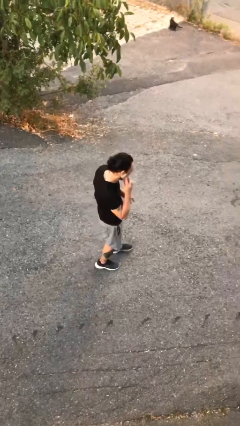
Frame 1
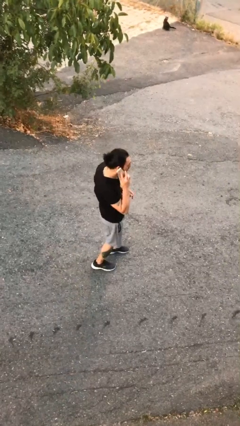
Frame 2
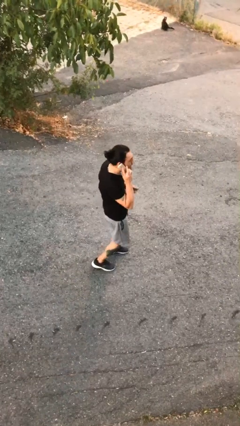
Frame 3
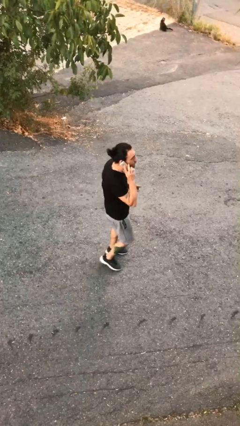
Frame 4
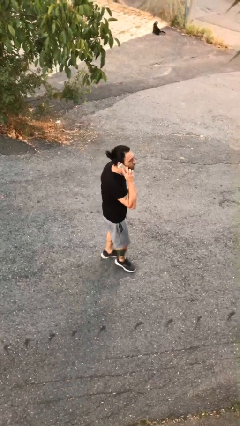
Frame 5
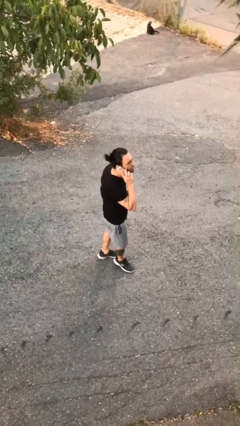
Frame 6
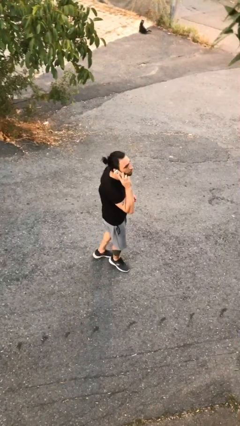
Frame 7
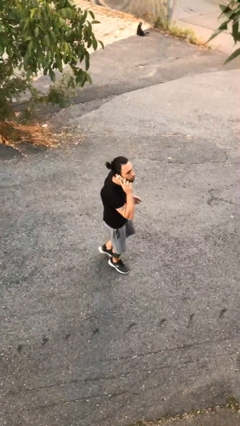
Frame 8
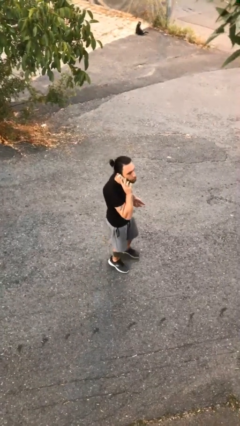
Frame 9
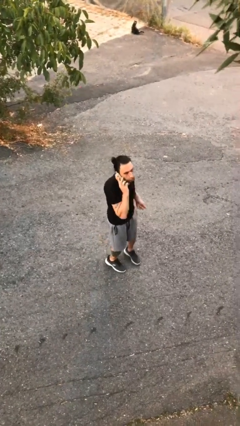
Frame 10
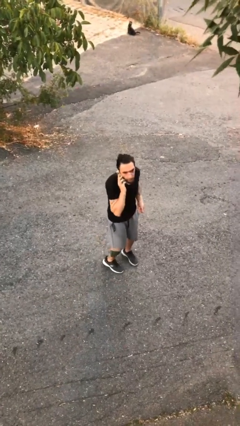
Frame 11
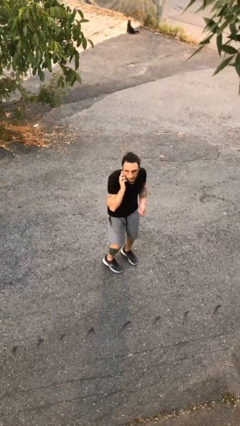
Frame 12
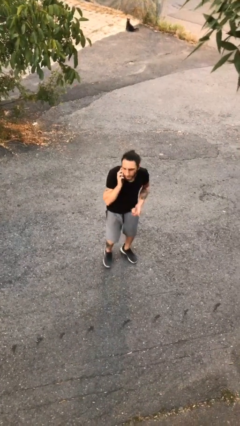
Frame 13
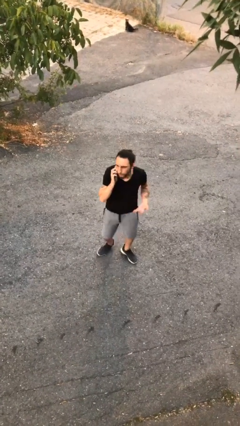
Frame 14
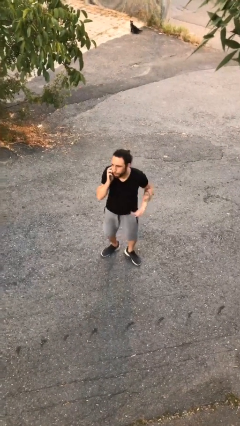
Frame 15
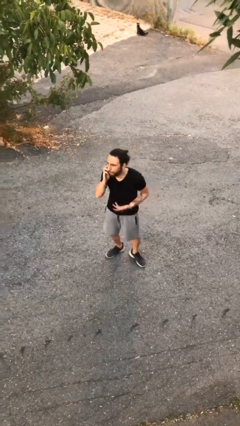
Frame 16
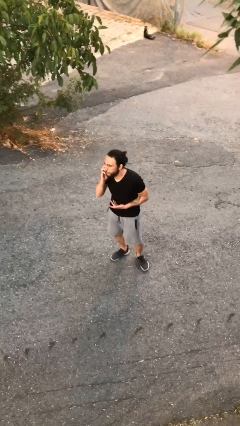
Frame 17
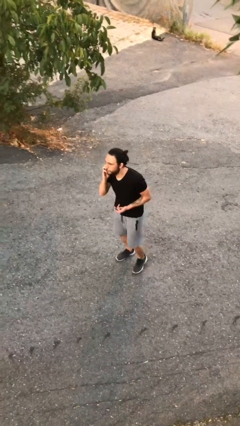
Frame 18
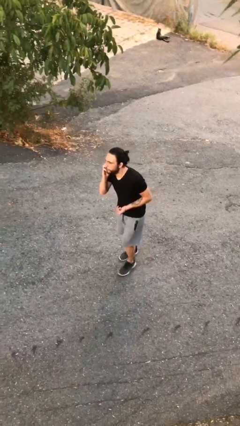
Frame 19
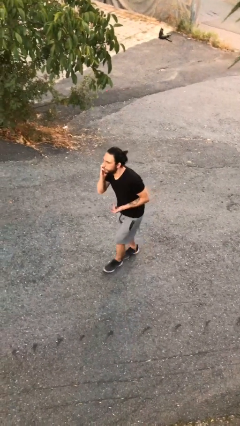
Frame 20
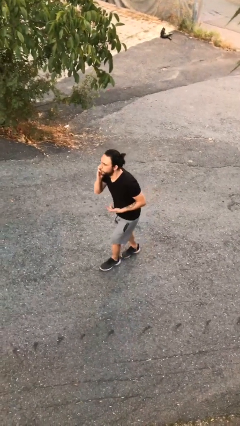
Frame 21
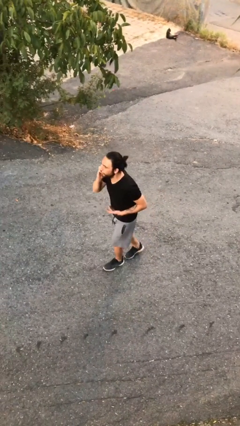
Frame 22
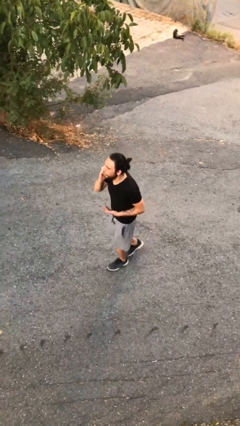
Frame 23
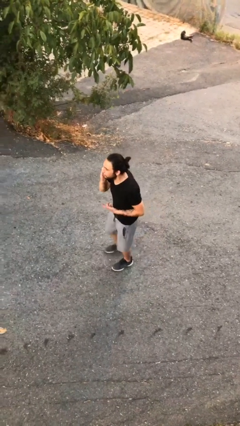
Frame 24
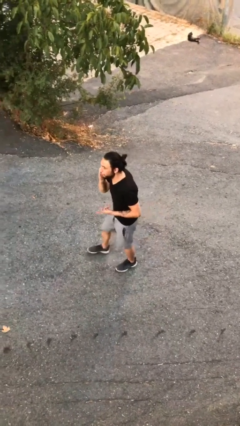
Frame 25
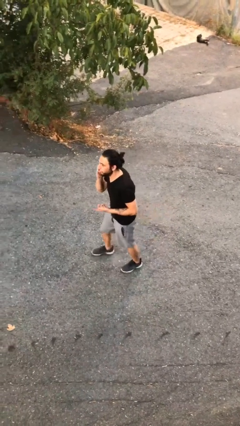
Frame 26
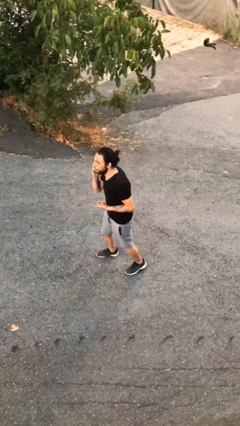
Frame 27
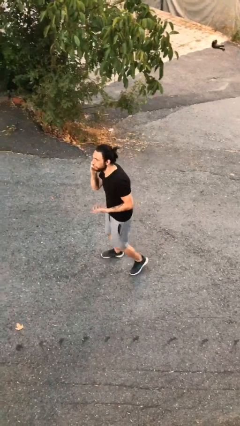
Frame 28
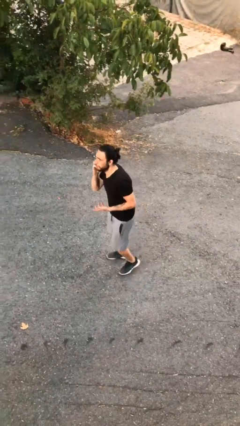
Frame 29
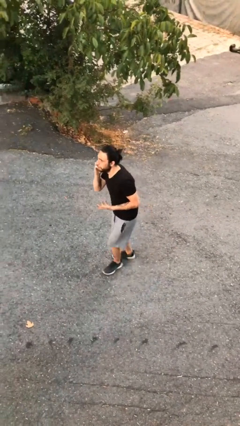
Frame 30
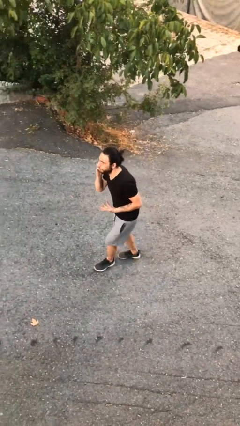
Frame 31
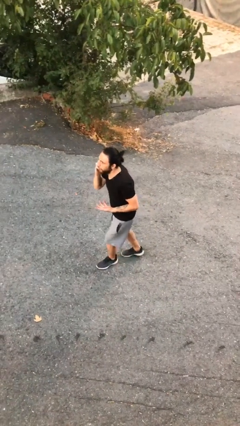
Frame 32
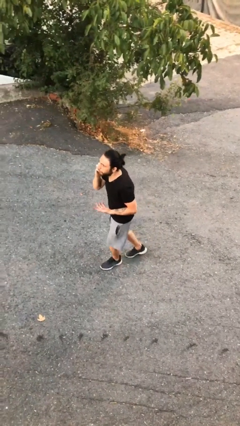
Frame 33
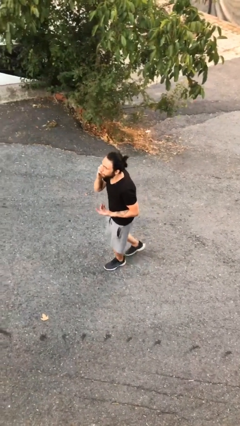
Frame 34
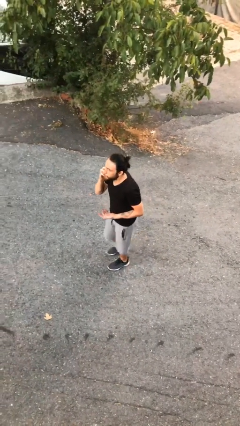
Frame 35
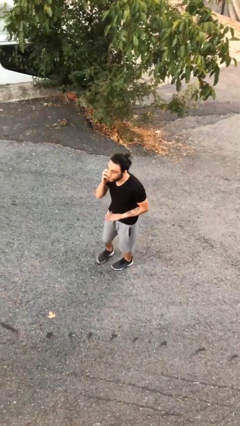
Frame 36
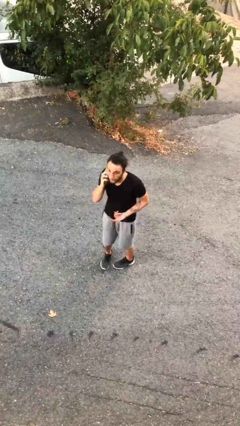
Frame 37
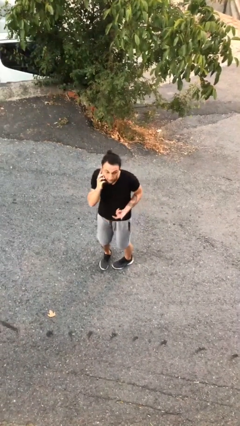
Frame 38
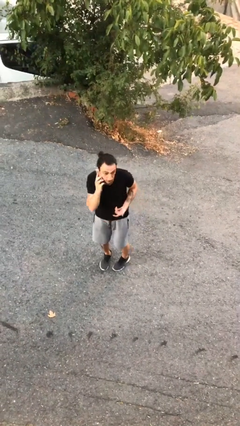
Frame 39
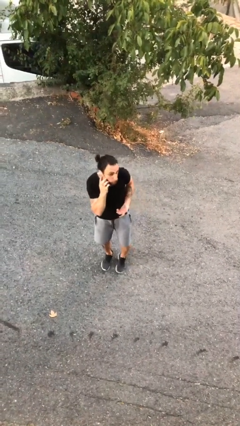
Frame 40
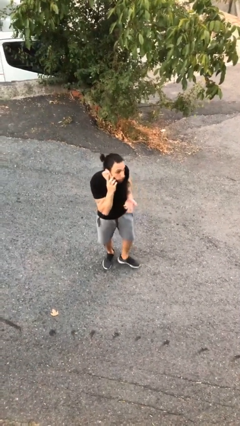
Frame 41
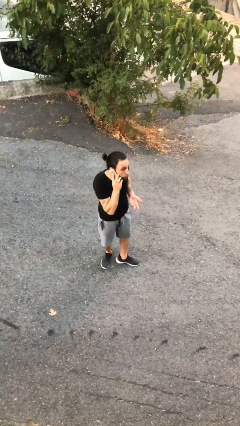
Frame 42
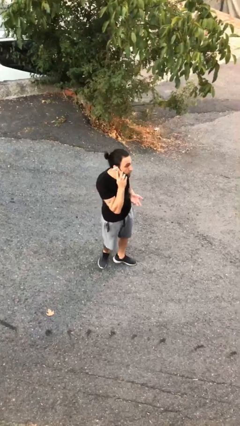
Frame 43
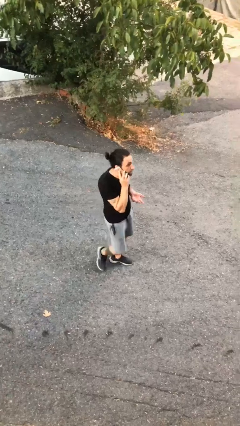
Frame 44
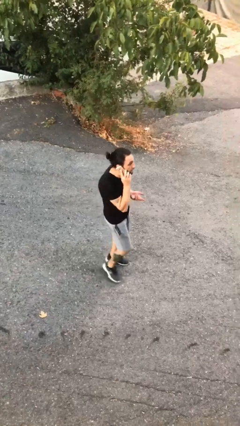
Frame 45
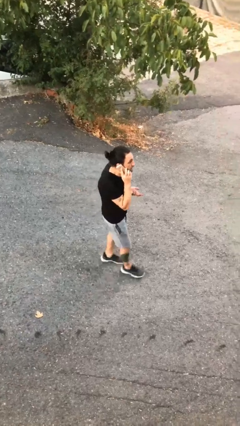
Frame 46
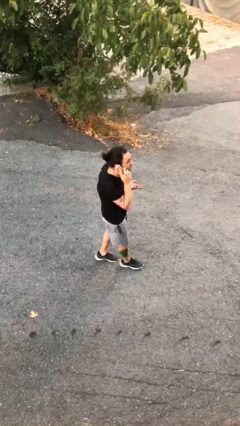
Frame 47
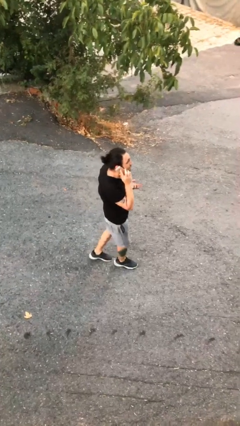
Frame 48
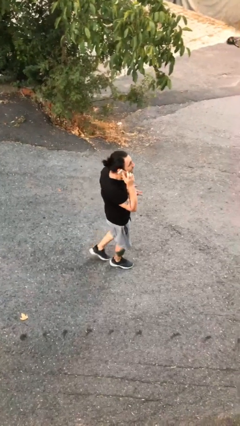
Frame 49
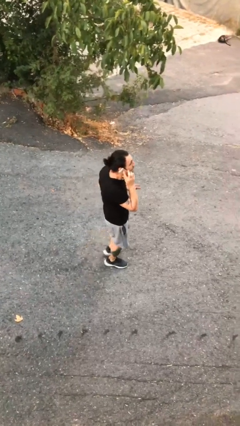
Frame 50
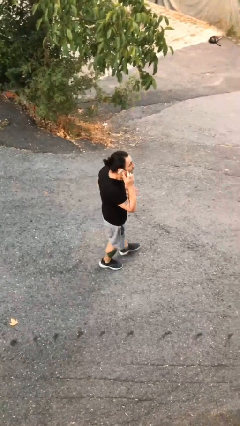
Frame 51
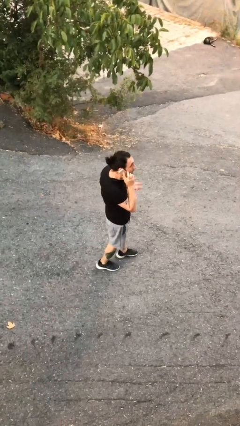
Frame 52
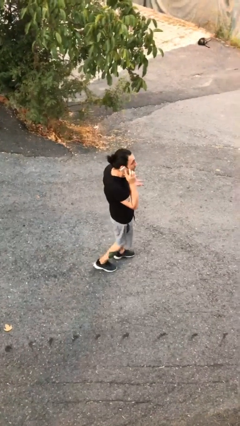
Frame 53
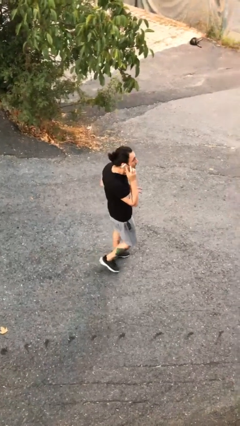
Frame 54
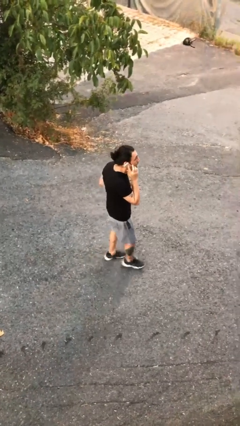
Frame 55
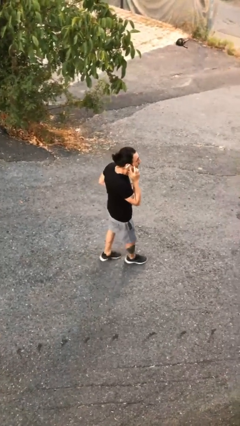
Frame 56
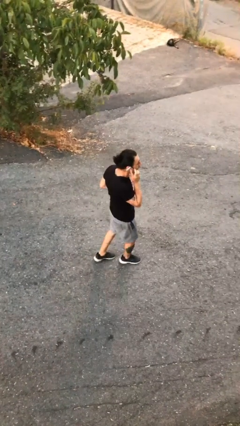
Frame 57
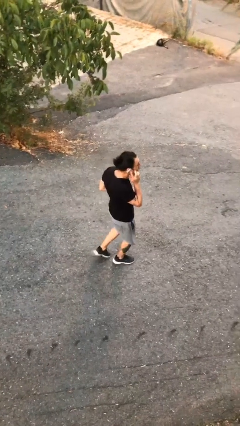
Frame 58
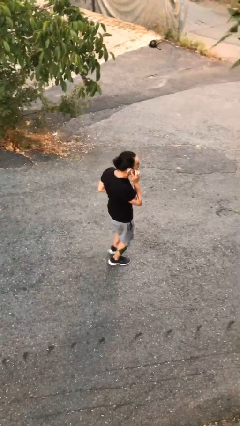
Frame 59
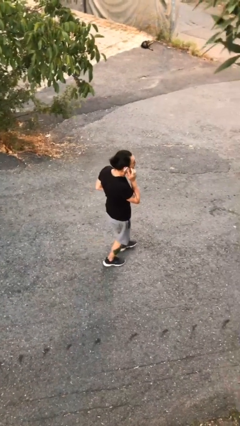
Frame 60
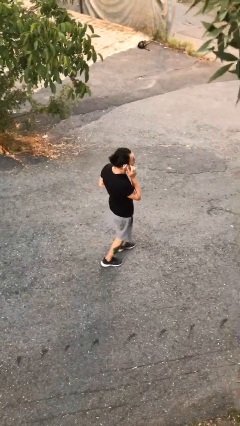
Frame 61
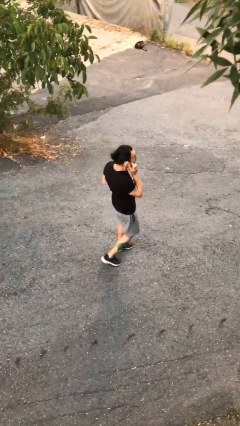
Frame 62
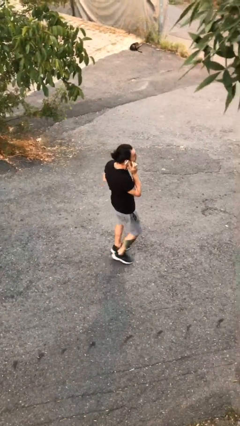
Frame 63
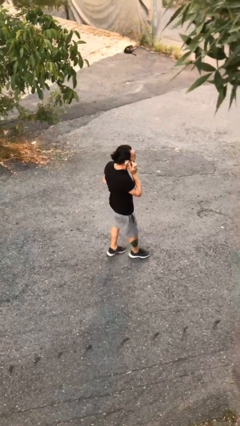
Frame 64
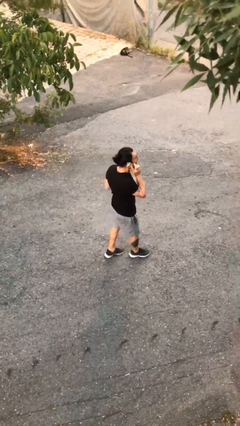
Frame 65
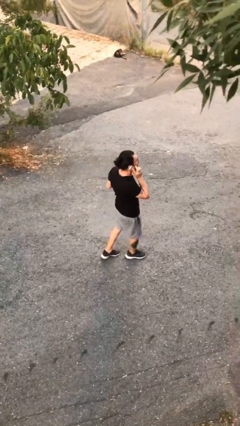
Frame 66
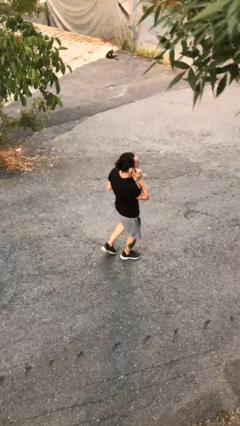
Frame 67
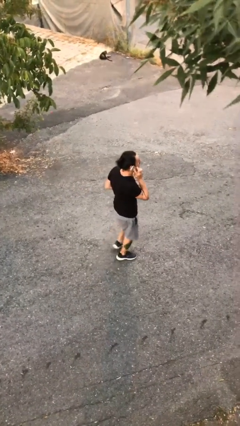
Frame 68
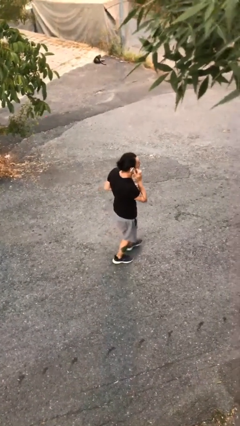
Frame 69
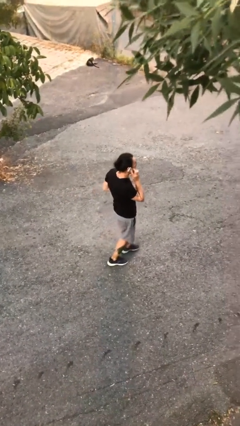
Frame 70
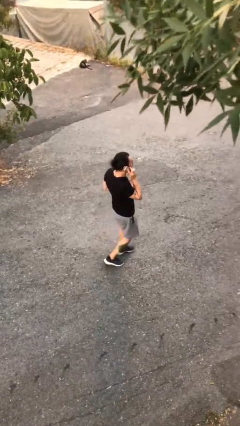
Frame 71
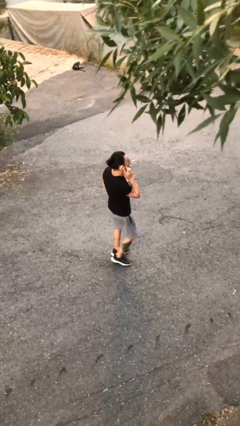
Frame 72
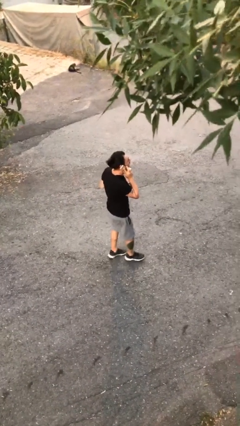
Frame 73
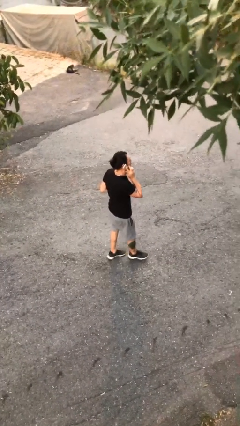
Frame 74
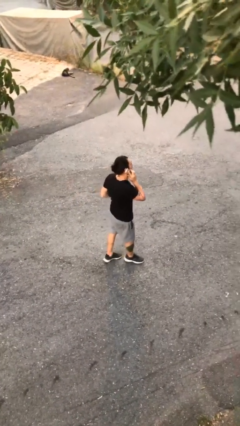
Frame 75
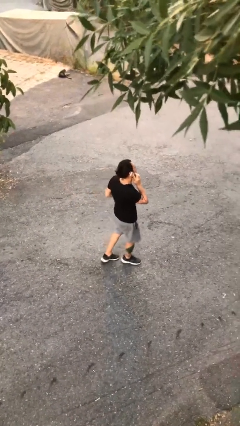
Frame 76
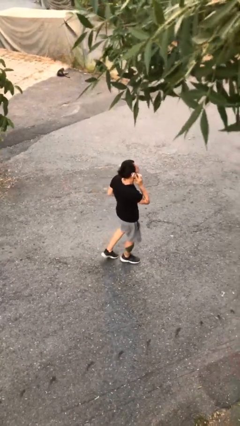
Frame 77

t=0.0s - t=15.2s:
person talks on phone

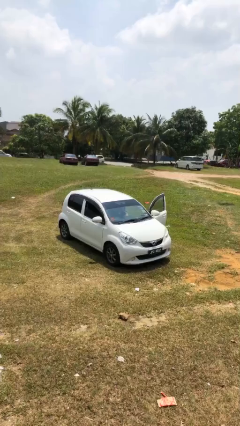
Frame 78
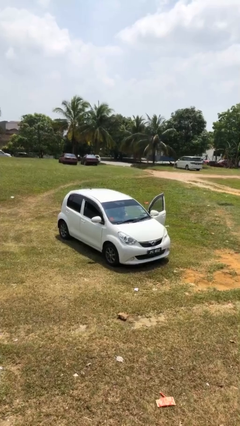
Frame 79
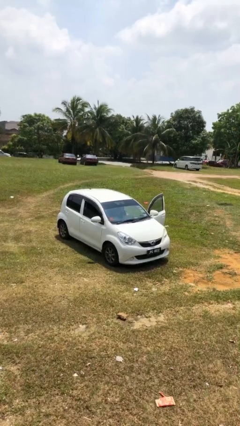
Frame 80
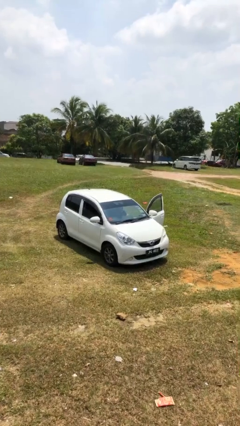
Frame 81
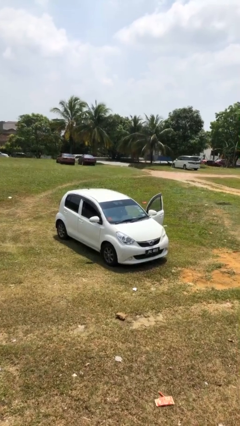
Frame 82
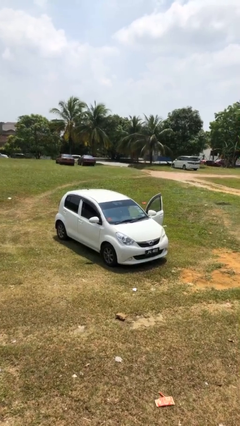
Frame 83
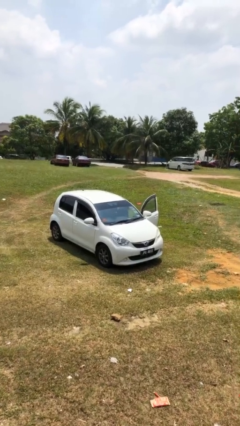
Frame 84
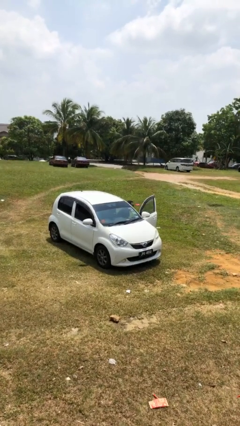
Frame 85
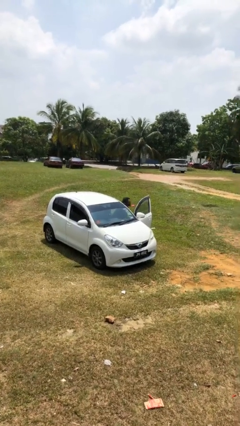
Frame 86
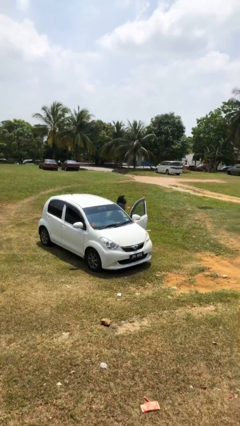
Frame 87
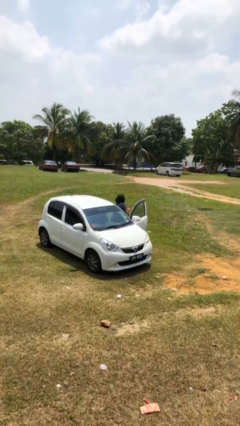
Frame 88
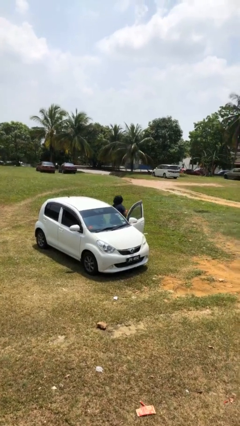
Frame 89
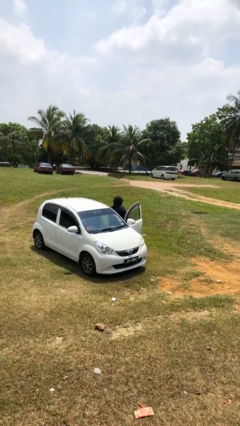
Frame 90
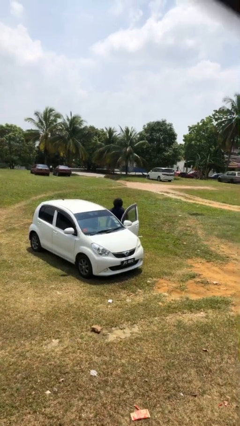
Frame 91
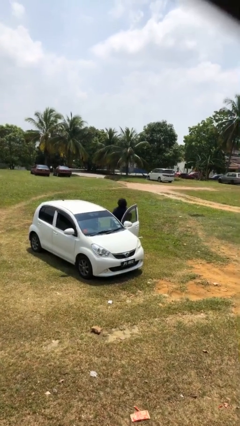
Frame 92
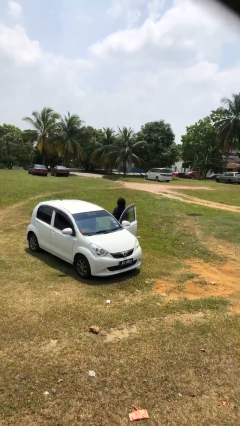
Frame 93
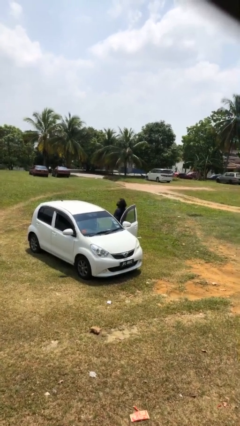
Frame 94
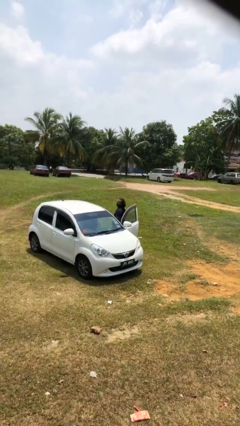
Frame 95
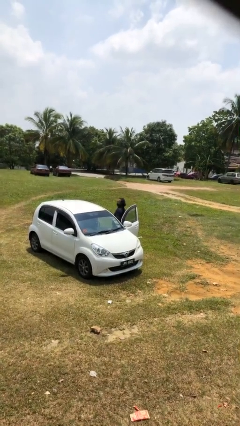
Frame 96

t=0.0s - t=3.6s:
person exits car
